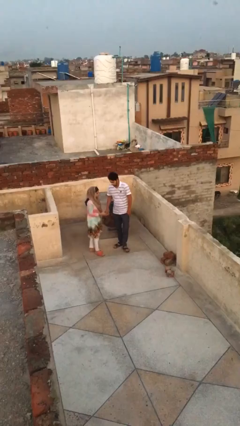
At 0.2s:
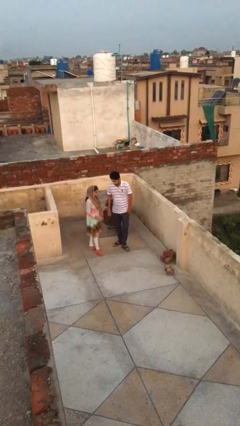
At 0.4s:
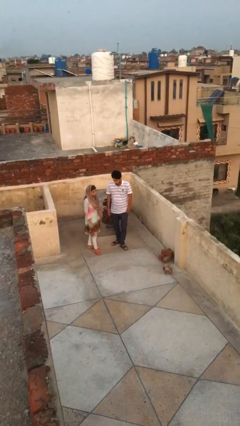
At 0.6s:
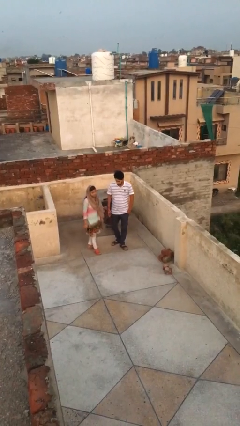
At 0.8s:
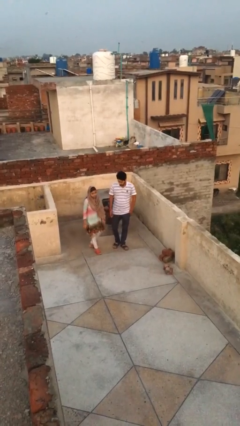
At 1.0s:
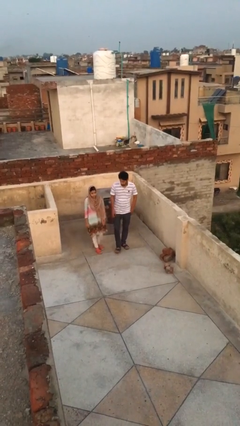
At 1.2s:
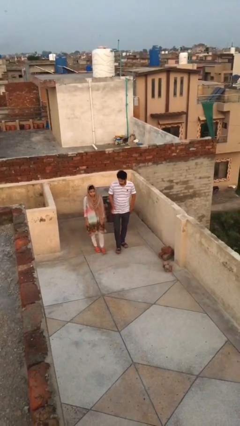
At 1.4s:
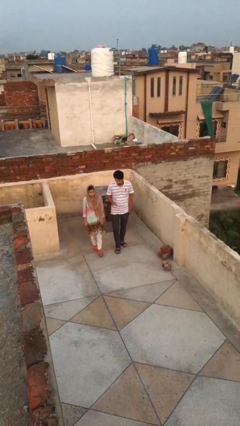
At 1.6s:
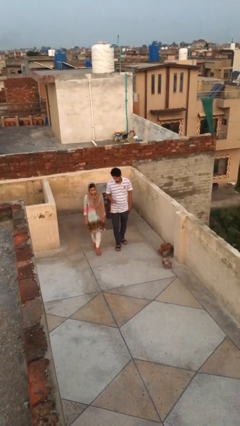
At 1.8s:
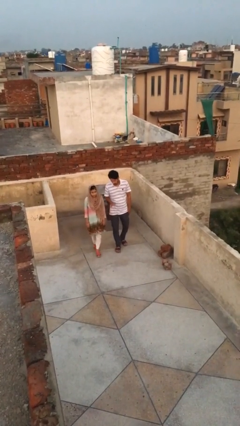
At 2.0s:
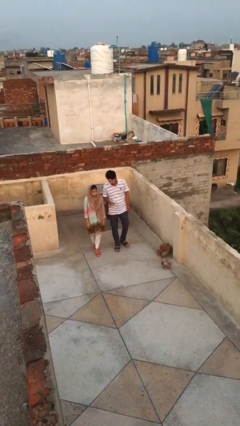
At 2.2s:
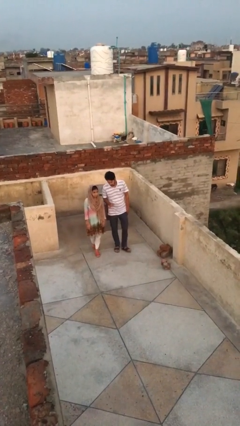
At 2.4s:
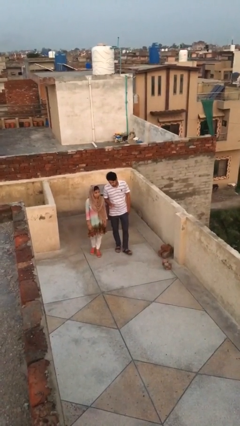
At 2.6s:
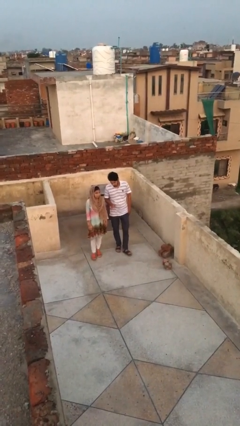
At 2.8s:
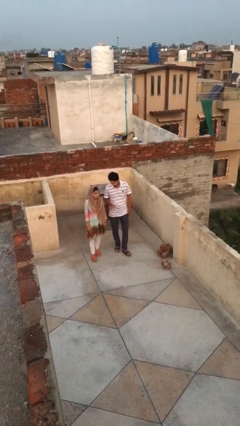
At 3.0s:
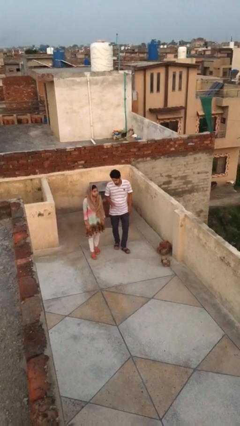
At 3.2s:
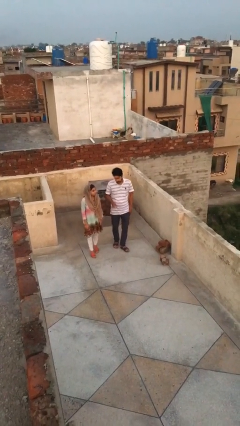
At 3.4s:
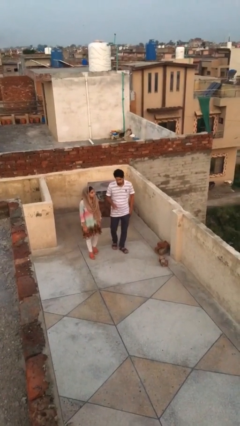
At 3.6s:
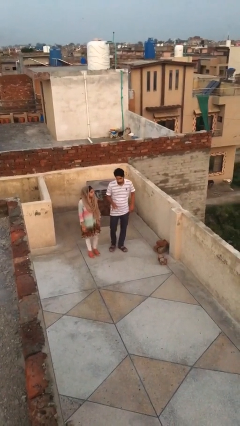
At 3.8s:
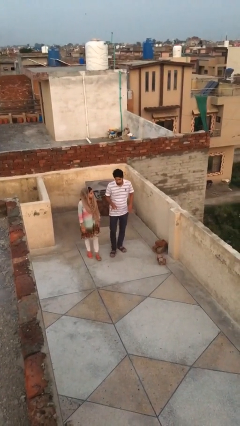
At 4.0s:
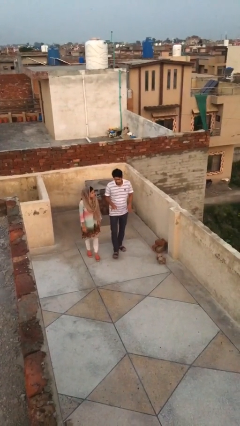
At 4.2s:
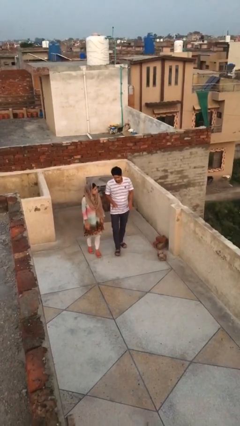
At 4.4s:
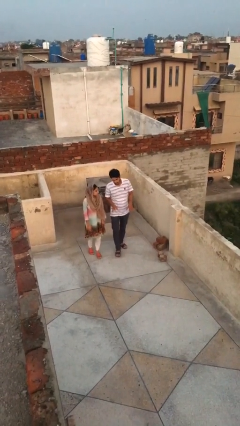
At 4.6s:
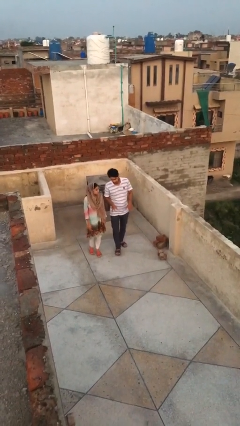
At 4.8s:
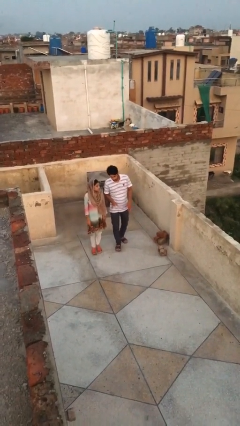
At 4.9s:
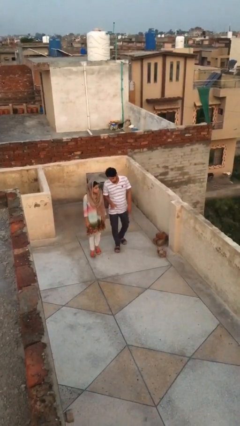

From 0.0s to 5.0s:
person talks to person

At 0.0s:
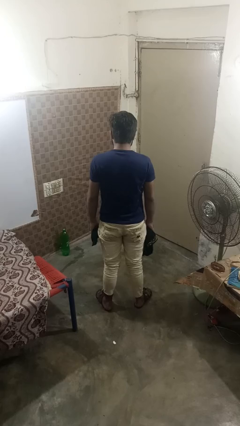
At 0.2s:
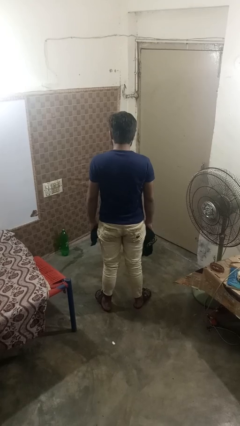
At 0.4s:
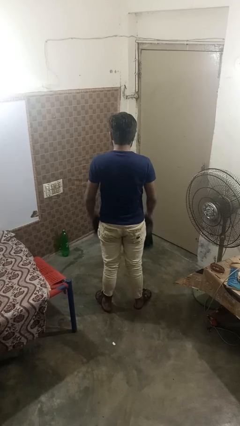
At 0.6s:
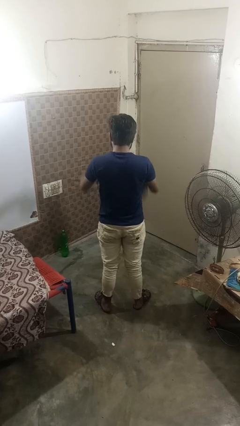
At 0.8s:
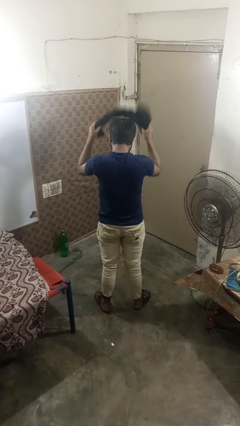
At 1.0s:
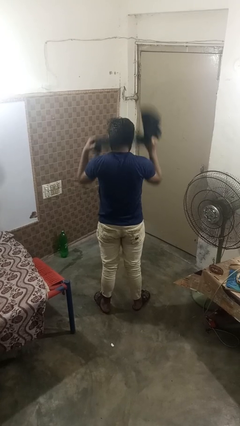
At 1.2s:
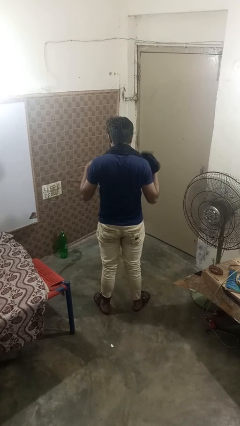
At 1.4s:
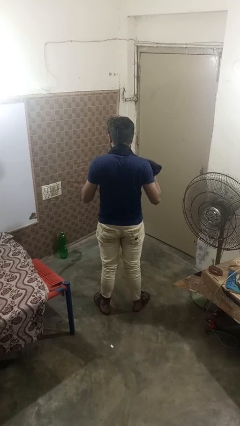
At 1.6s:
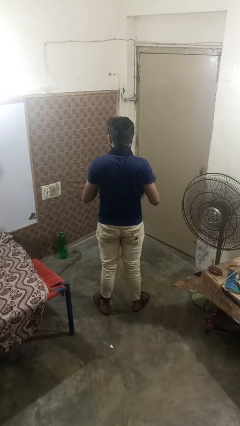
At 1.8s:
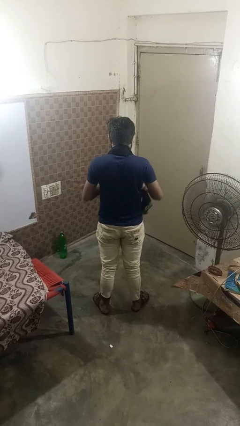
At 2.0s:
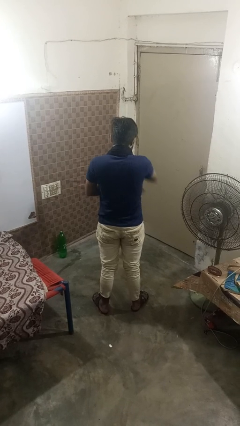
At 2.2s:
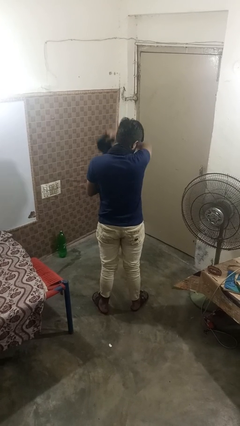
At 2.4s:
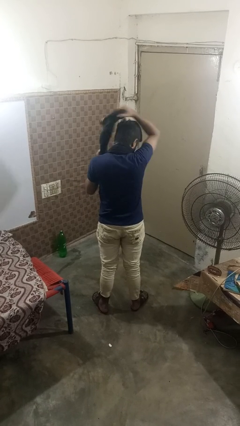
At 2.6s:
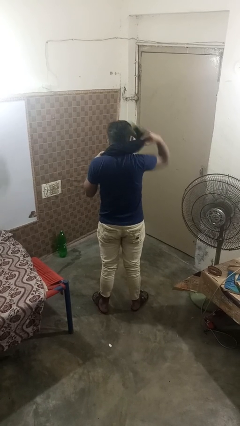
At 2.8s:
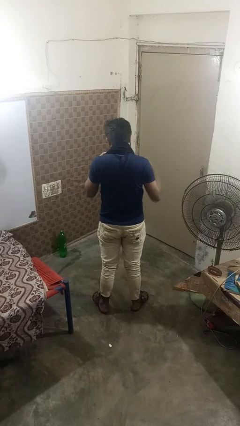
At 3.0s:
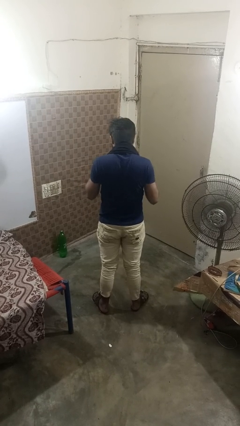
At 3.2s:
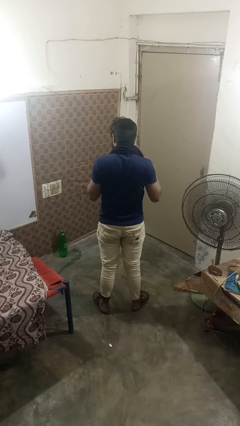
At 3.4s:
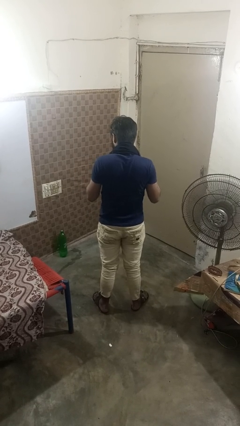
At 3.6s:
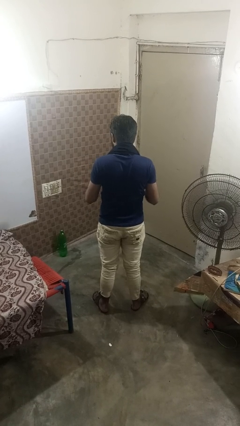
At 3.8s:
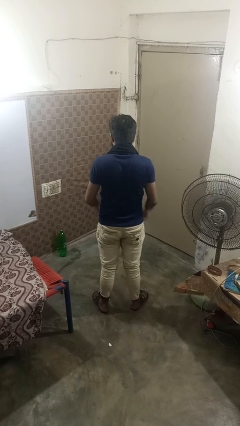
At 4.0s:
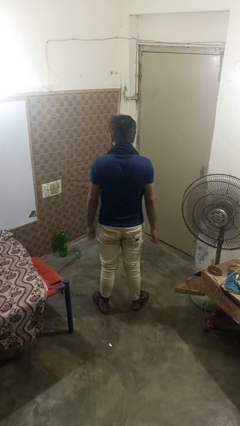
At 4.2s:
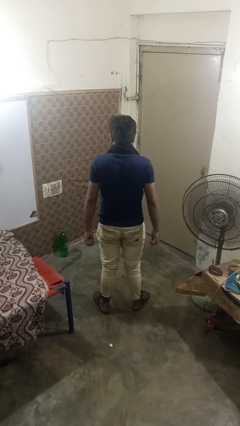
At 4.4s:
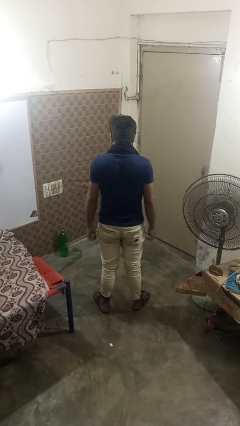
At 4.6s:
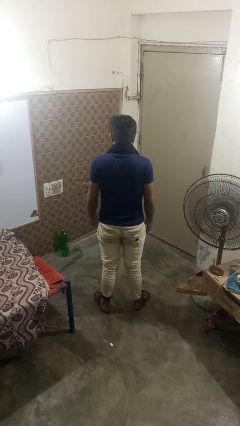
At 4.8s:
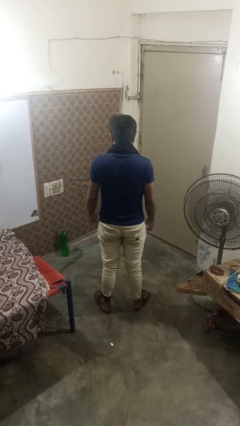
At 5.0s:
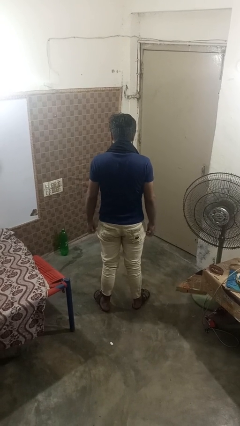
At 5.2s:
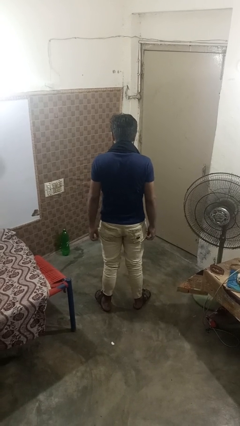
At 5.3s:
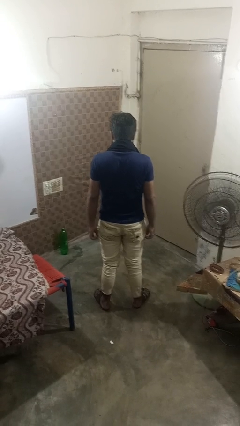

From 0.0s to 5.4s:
person puts on scarf

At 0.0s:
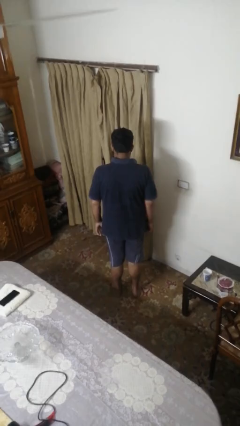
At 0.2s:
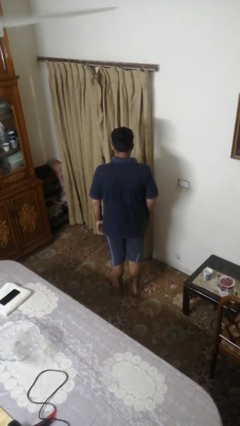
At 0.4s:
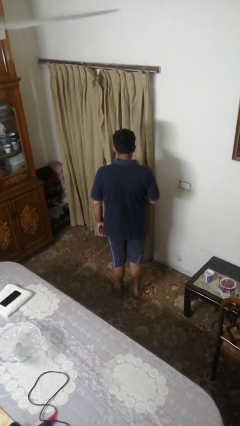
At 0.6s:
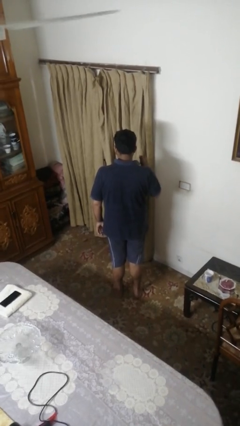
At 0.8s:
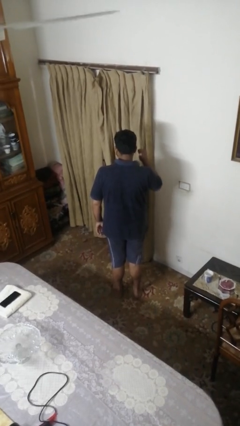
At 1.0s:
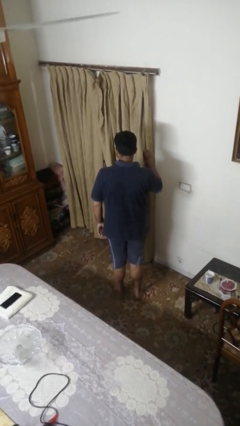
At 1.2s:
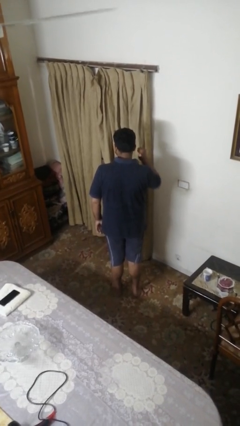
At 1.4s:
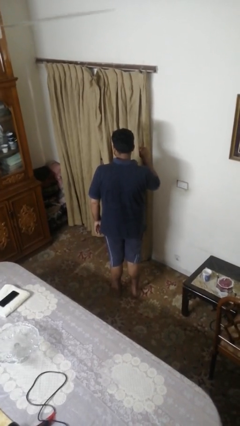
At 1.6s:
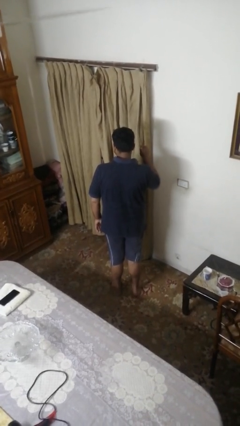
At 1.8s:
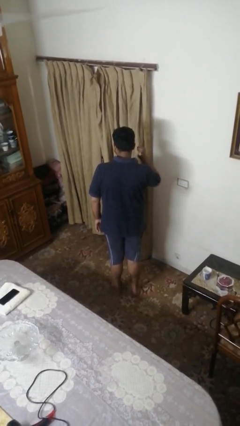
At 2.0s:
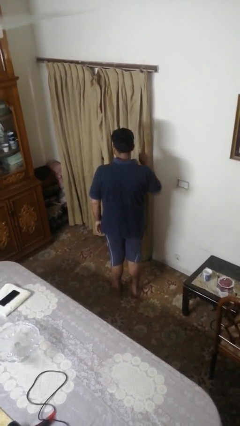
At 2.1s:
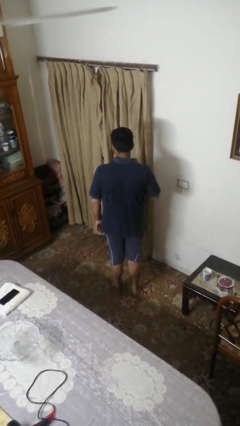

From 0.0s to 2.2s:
person gestures behind me

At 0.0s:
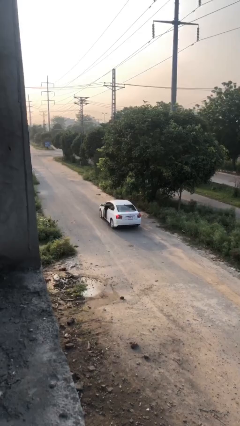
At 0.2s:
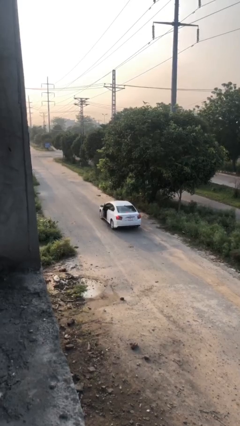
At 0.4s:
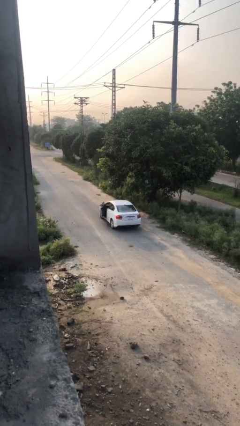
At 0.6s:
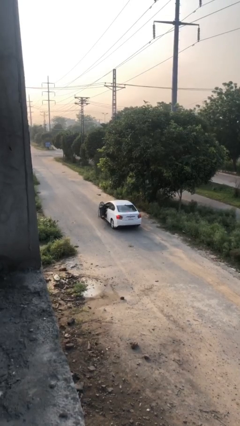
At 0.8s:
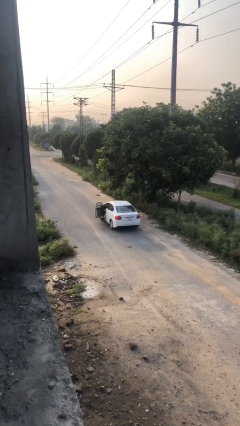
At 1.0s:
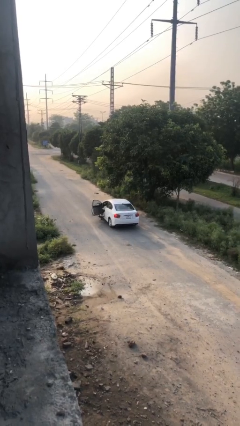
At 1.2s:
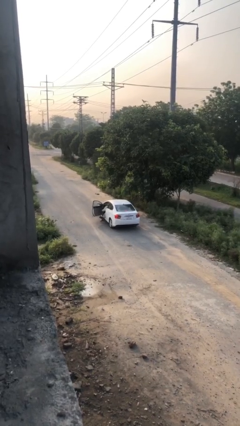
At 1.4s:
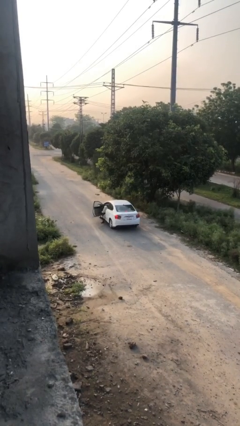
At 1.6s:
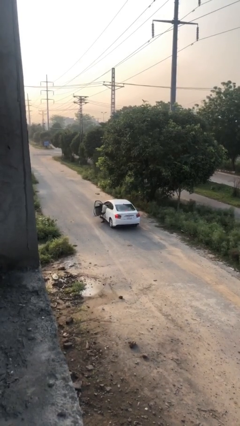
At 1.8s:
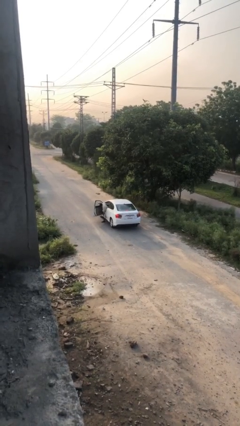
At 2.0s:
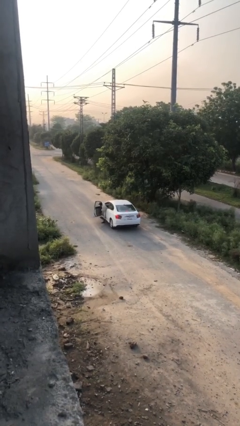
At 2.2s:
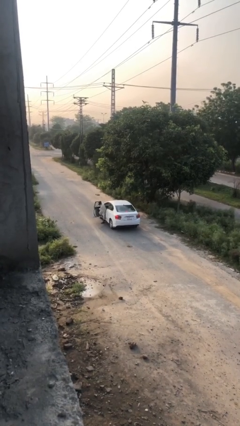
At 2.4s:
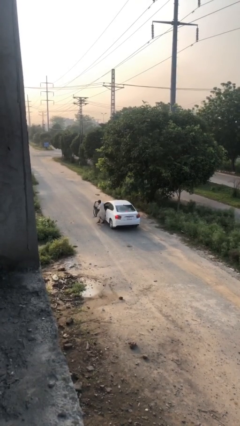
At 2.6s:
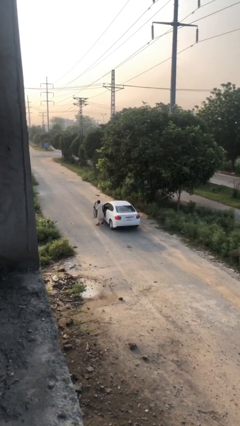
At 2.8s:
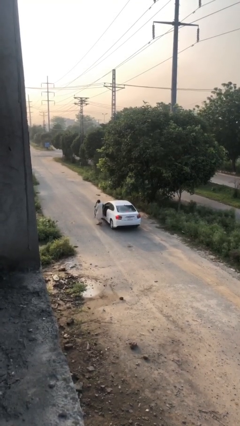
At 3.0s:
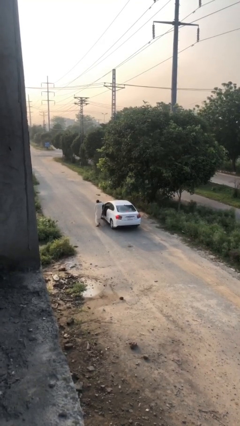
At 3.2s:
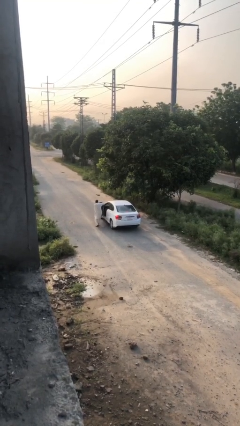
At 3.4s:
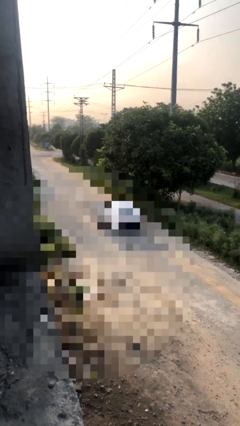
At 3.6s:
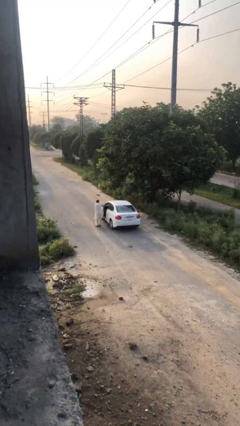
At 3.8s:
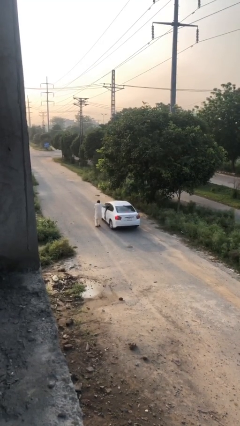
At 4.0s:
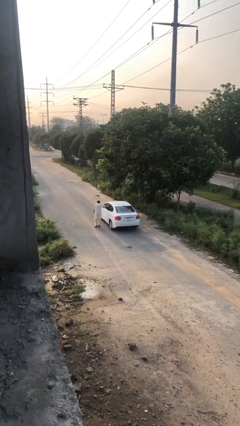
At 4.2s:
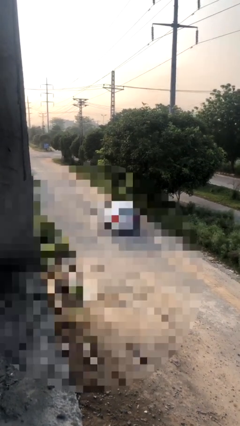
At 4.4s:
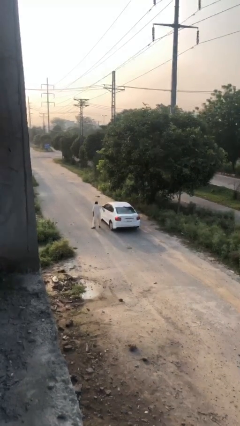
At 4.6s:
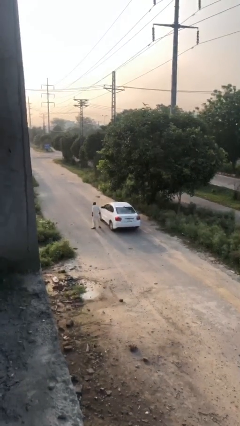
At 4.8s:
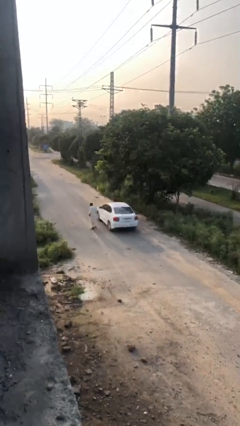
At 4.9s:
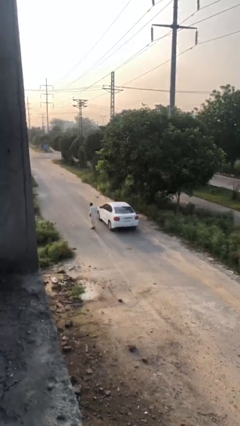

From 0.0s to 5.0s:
car drops off person

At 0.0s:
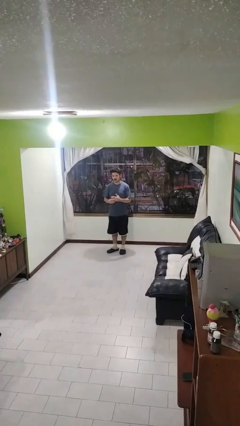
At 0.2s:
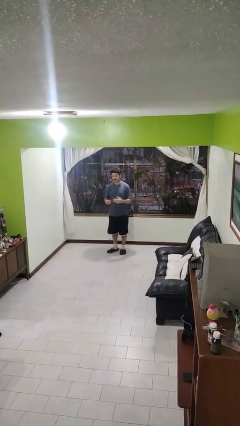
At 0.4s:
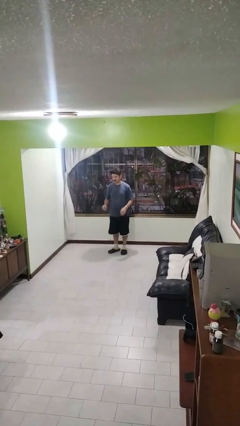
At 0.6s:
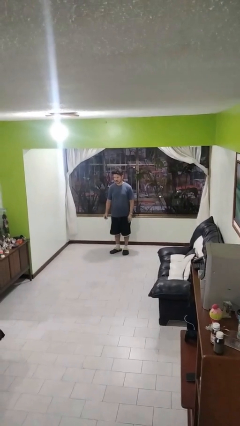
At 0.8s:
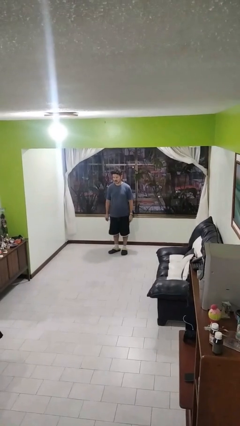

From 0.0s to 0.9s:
person takes off ring
